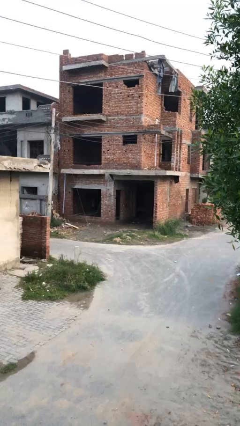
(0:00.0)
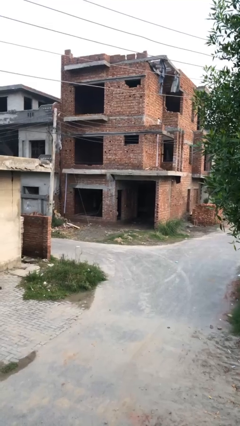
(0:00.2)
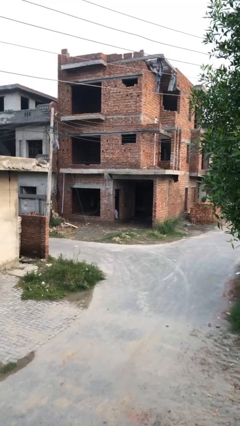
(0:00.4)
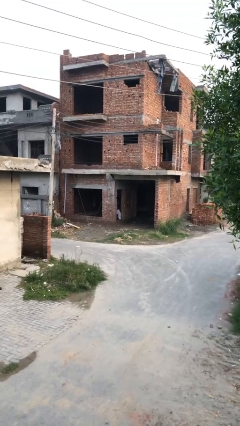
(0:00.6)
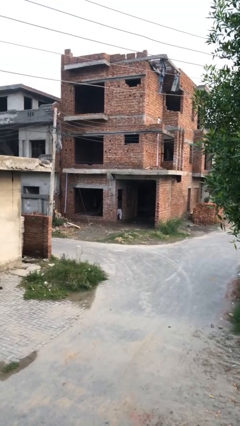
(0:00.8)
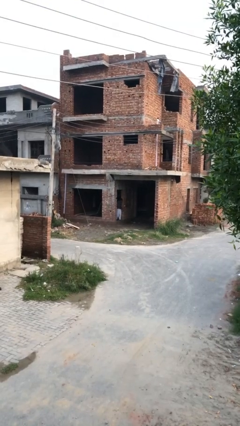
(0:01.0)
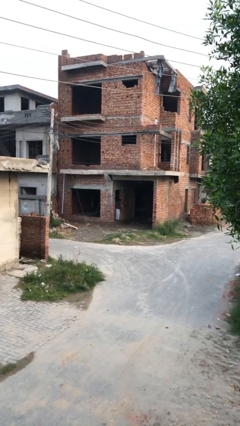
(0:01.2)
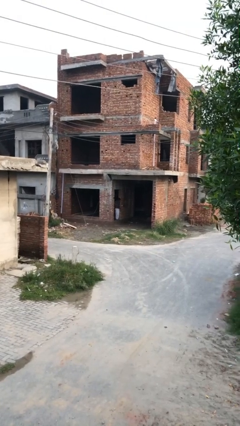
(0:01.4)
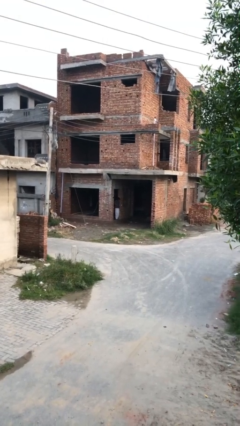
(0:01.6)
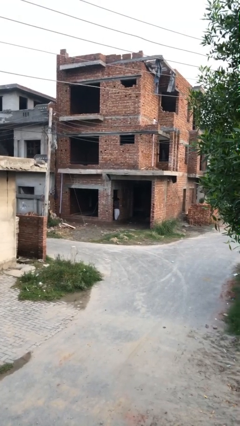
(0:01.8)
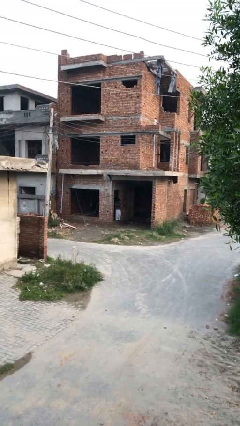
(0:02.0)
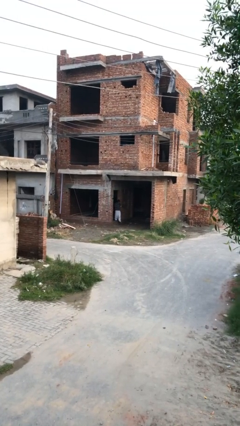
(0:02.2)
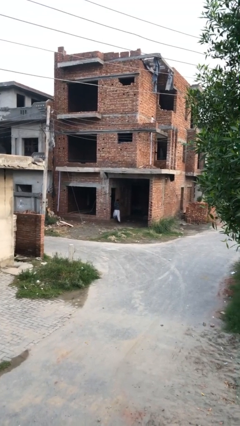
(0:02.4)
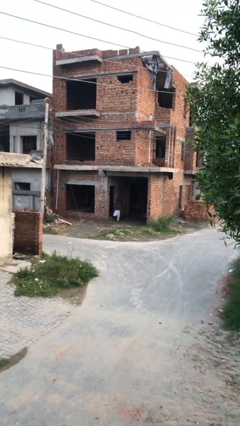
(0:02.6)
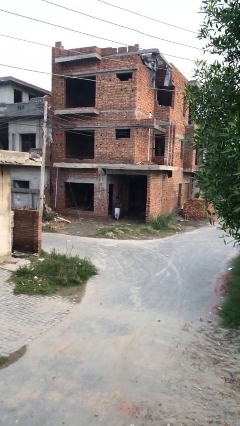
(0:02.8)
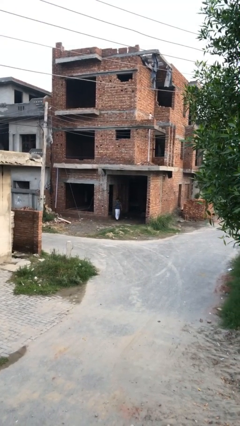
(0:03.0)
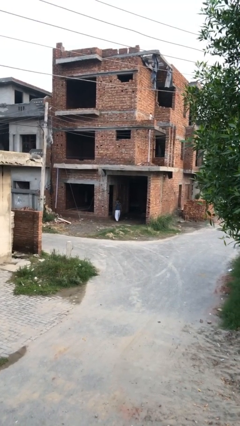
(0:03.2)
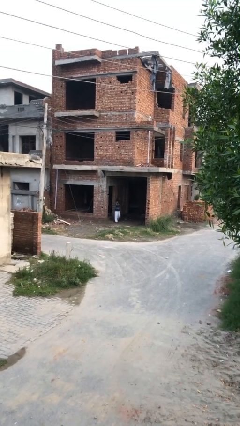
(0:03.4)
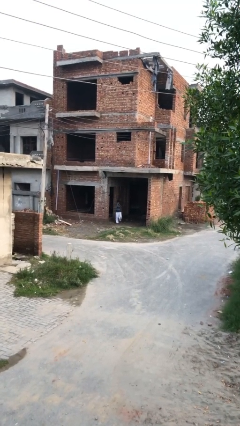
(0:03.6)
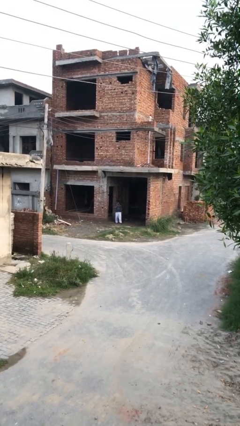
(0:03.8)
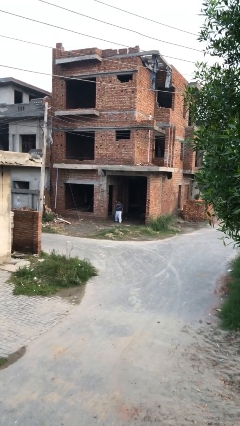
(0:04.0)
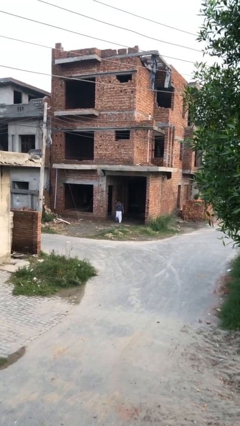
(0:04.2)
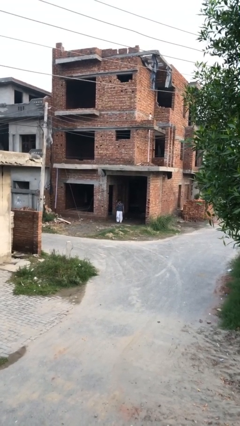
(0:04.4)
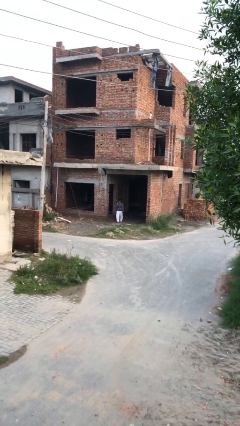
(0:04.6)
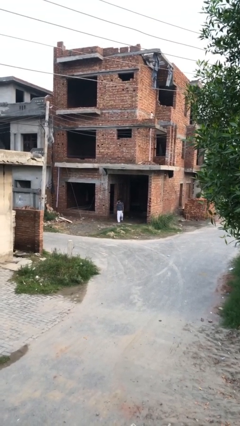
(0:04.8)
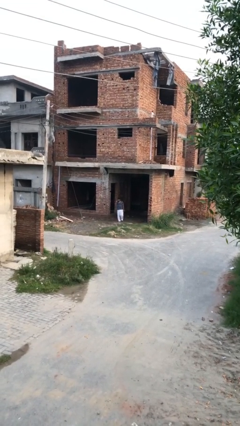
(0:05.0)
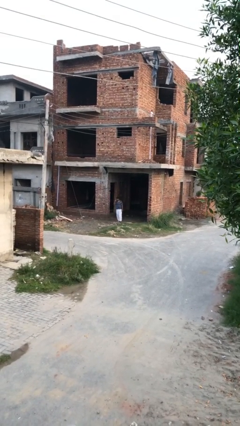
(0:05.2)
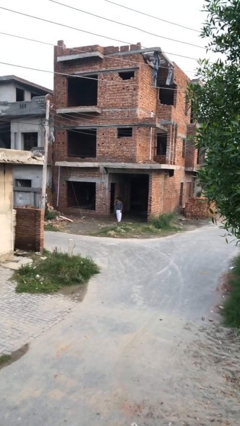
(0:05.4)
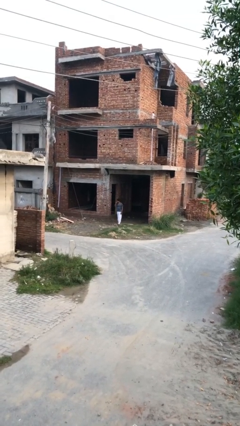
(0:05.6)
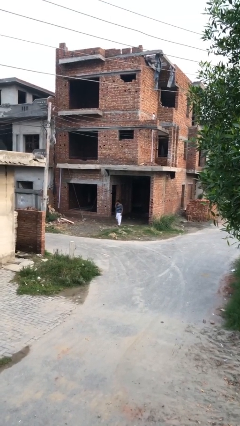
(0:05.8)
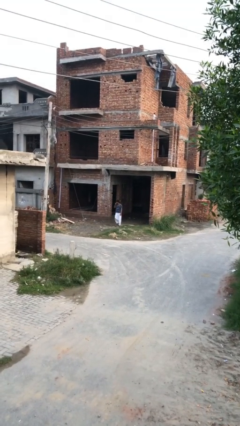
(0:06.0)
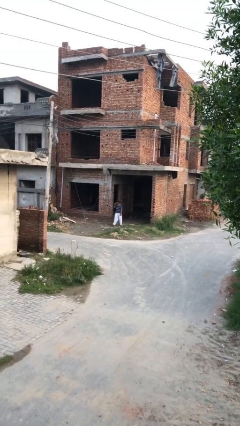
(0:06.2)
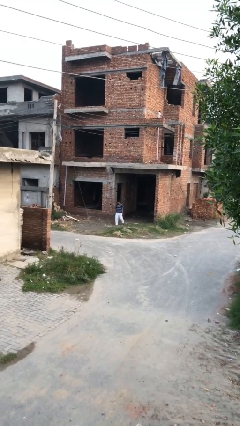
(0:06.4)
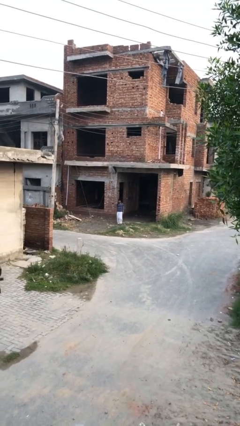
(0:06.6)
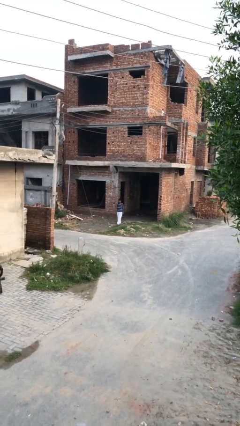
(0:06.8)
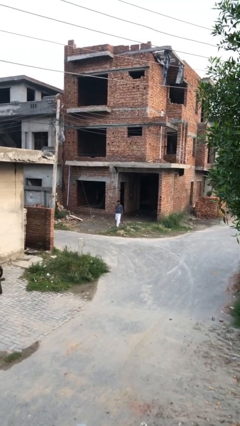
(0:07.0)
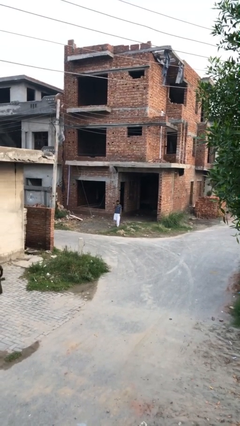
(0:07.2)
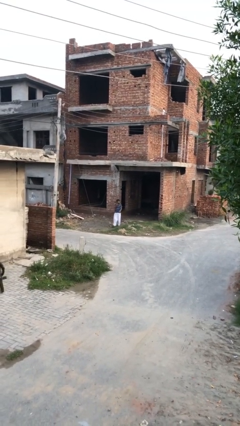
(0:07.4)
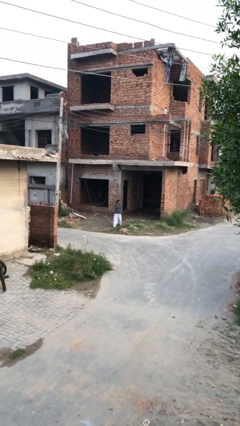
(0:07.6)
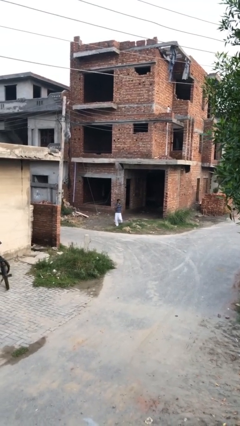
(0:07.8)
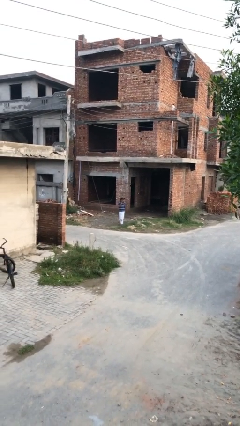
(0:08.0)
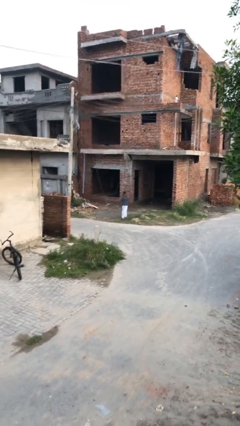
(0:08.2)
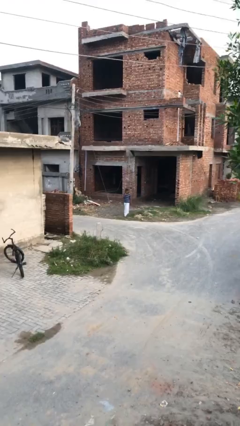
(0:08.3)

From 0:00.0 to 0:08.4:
person enters scene through structure

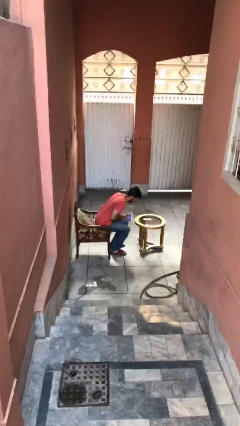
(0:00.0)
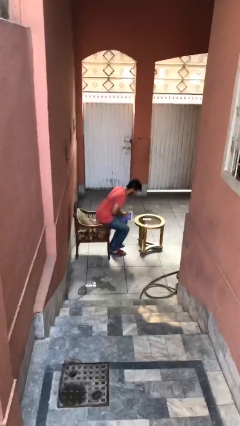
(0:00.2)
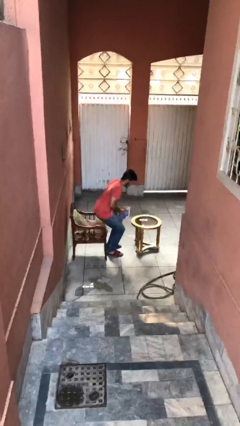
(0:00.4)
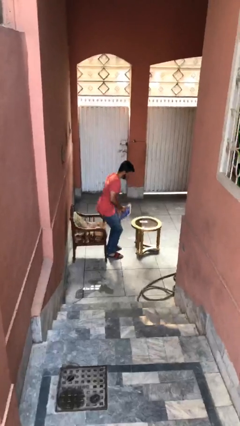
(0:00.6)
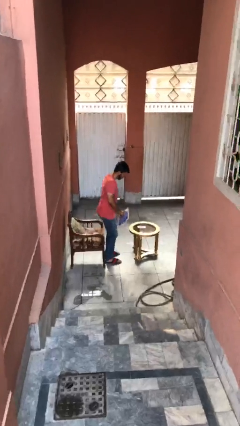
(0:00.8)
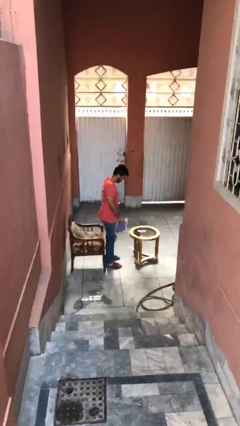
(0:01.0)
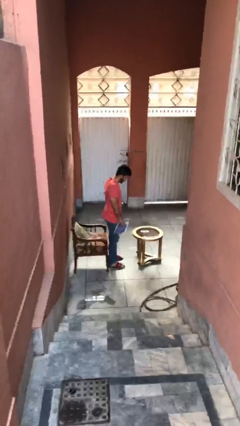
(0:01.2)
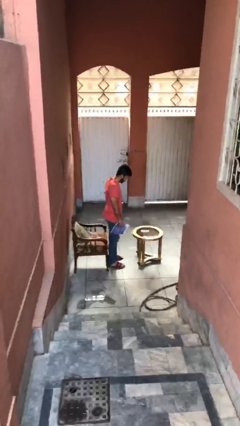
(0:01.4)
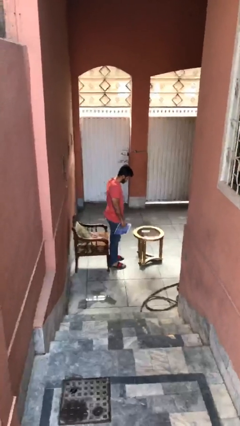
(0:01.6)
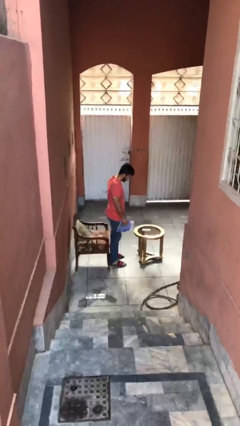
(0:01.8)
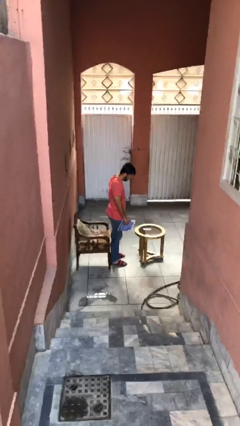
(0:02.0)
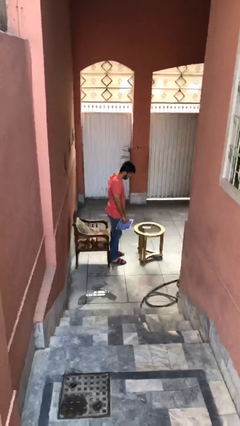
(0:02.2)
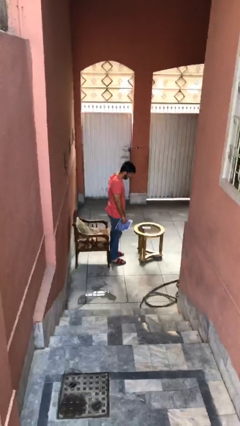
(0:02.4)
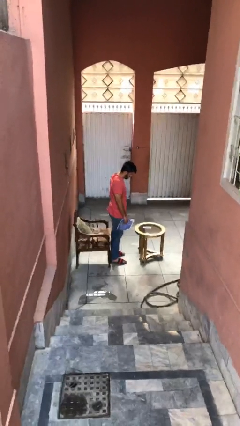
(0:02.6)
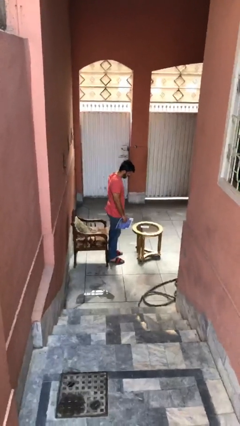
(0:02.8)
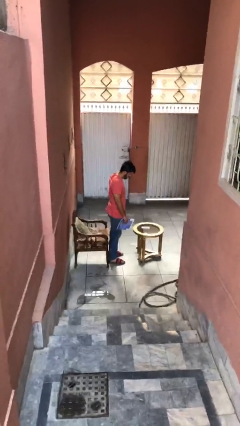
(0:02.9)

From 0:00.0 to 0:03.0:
person stands up

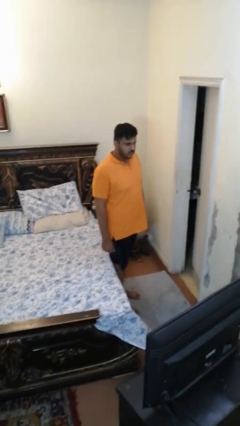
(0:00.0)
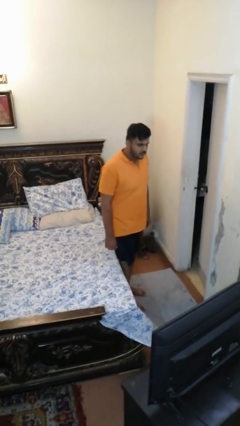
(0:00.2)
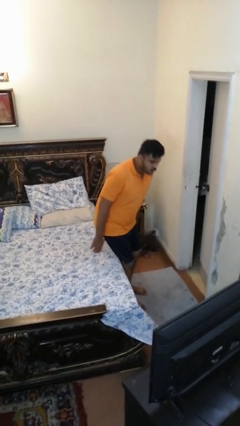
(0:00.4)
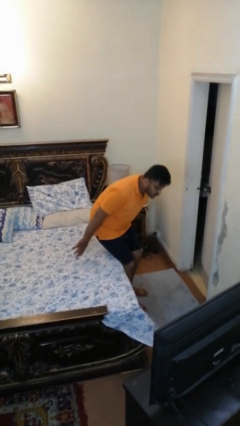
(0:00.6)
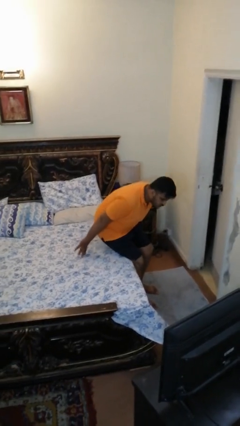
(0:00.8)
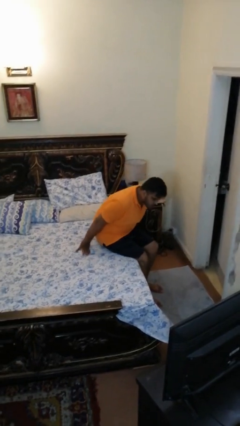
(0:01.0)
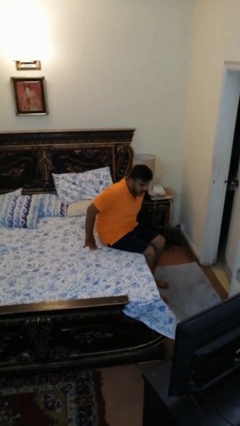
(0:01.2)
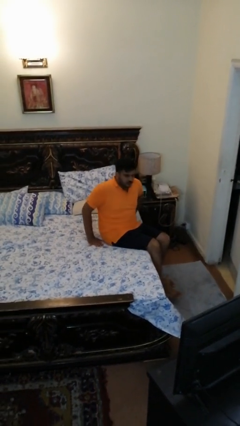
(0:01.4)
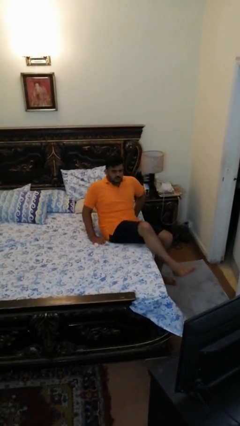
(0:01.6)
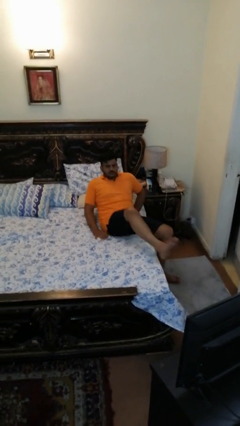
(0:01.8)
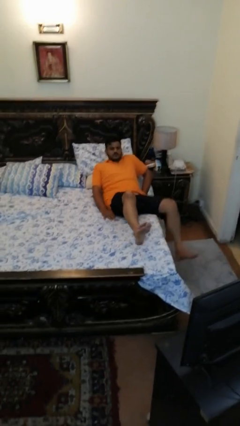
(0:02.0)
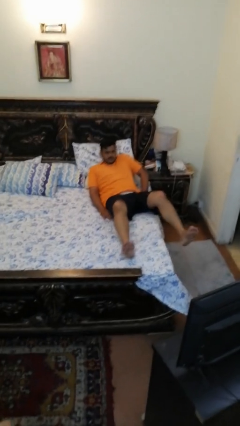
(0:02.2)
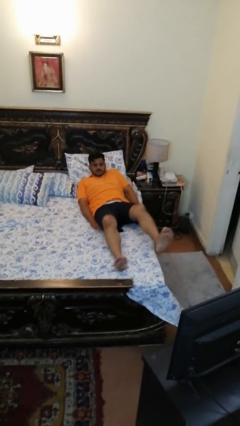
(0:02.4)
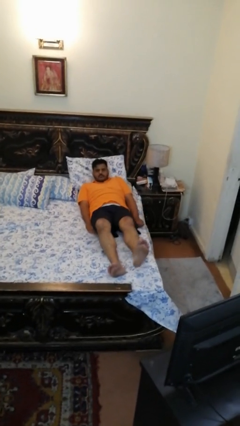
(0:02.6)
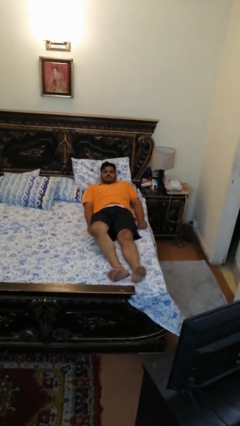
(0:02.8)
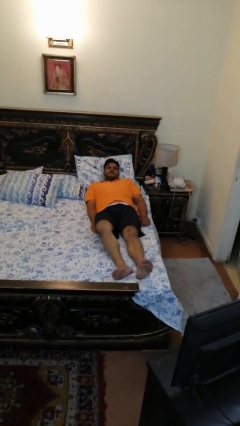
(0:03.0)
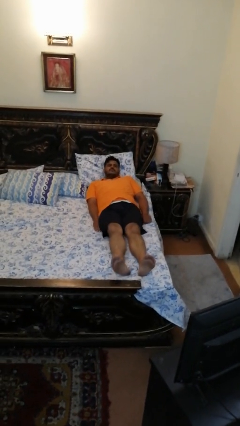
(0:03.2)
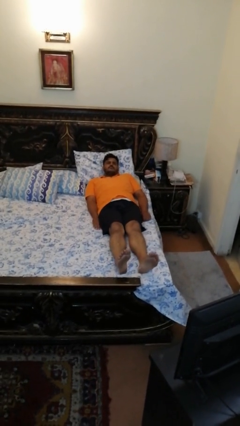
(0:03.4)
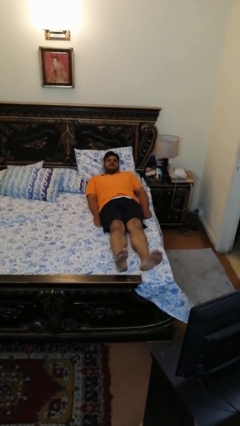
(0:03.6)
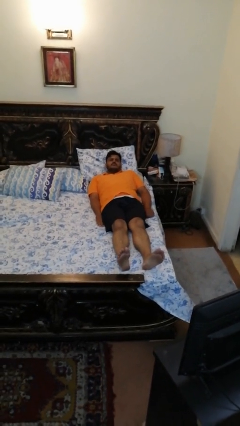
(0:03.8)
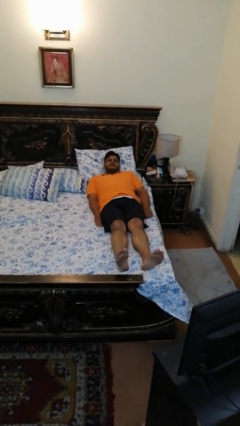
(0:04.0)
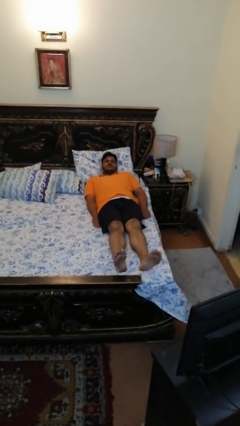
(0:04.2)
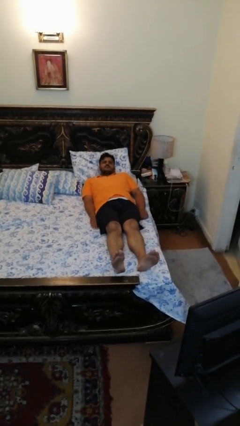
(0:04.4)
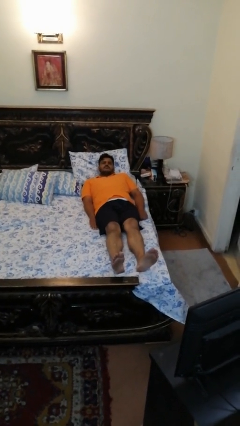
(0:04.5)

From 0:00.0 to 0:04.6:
person lies down on bed

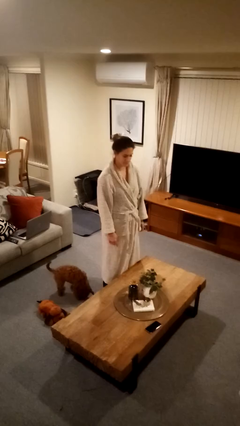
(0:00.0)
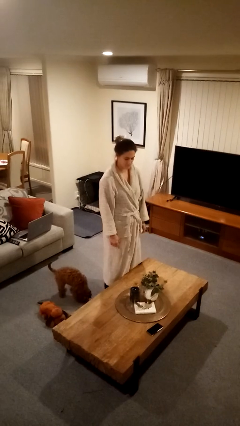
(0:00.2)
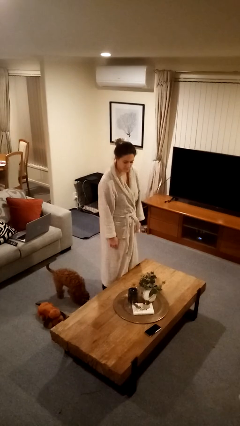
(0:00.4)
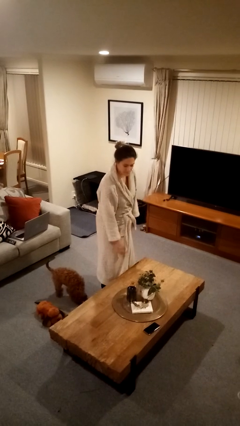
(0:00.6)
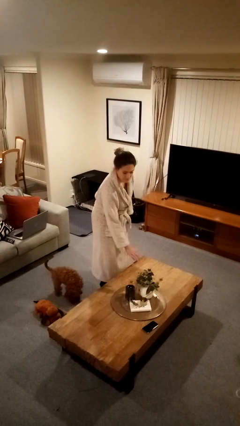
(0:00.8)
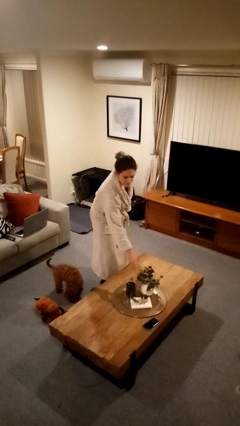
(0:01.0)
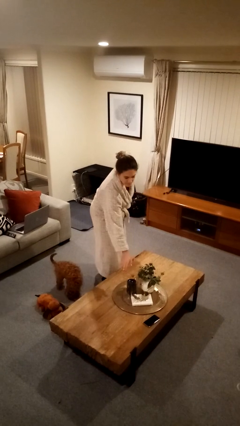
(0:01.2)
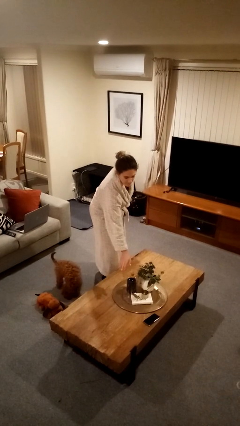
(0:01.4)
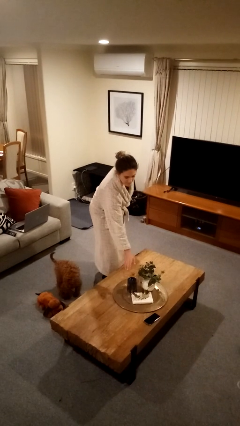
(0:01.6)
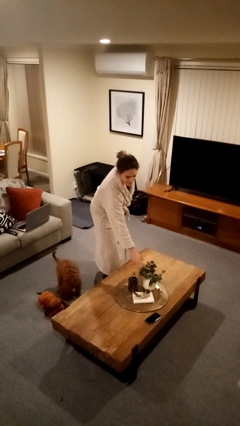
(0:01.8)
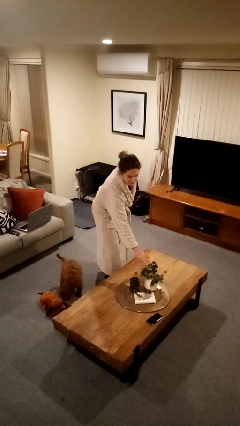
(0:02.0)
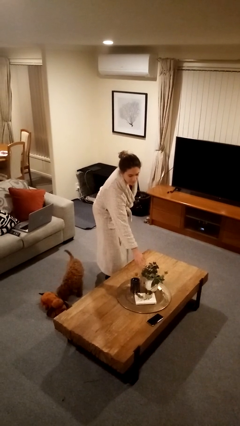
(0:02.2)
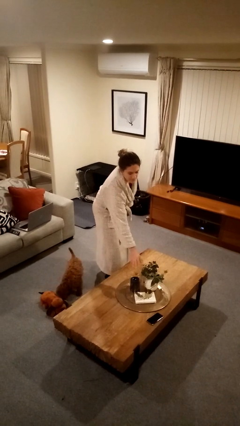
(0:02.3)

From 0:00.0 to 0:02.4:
person waves hand over object
